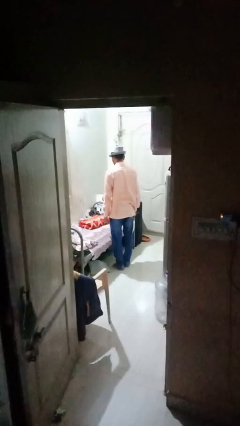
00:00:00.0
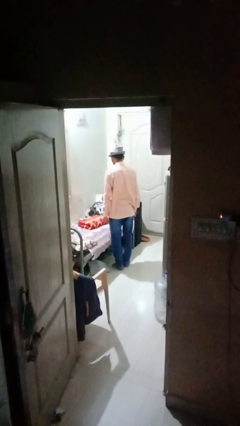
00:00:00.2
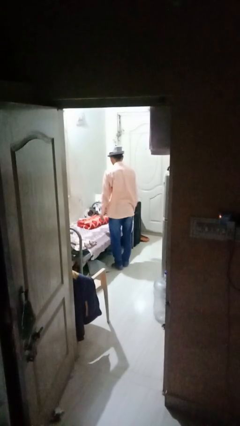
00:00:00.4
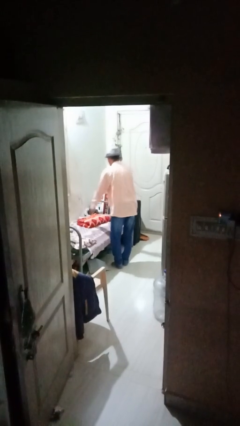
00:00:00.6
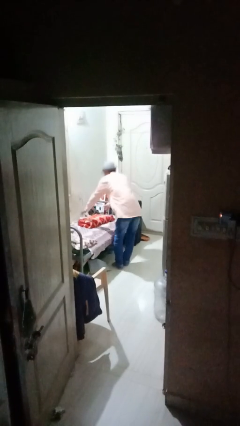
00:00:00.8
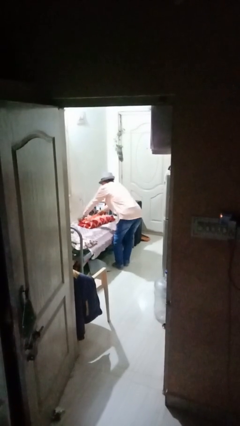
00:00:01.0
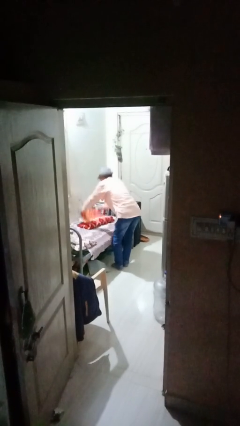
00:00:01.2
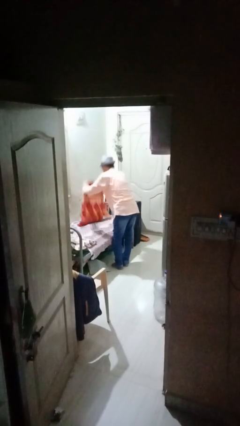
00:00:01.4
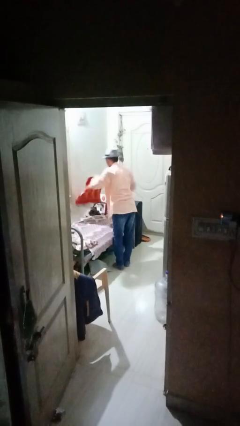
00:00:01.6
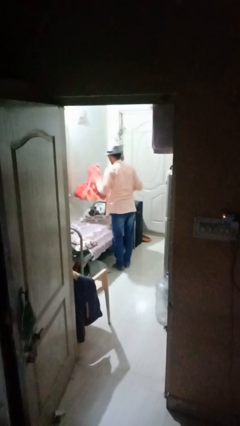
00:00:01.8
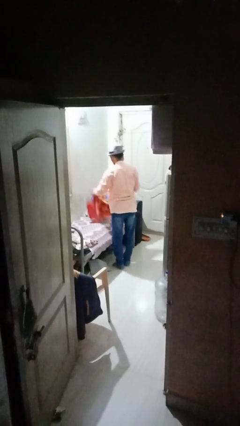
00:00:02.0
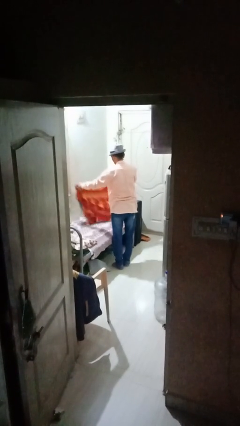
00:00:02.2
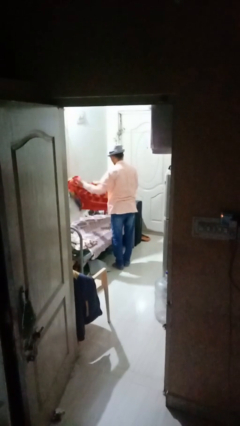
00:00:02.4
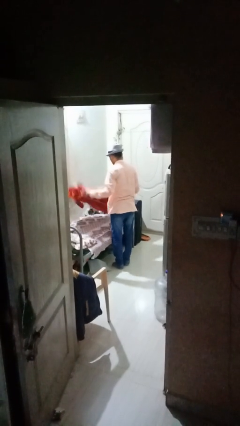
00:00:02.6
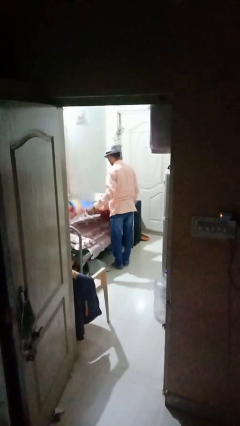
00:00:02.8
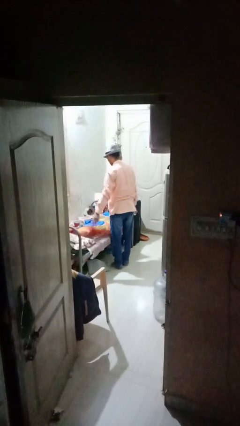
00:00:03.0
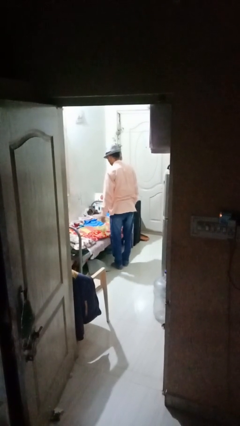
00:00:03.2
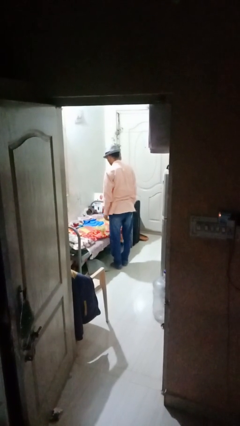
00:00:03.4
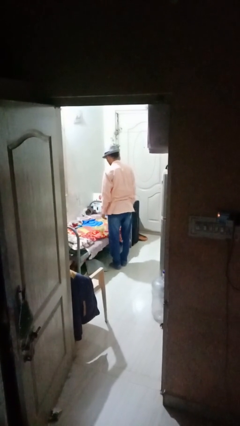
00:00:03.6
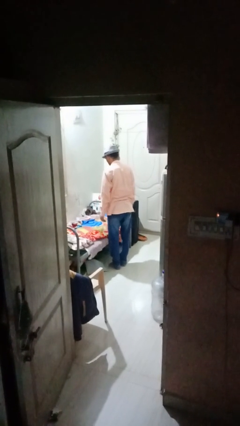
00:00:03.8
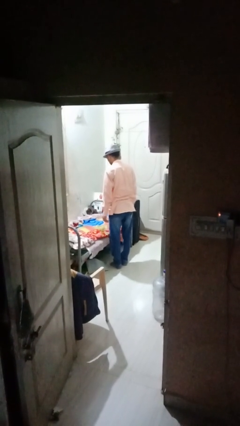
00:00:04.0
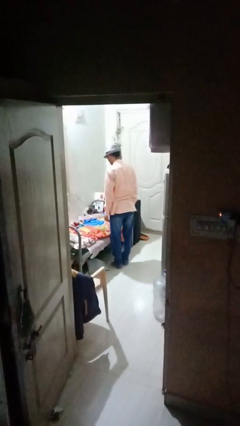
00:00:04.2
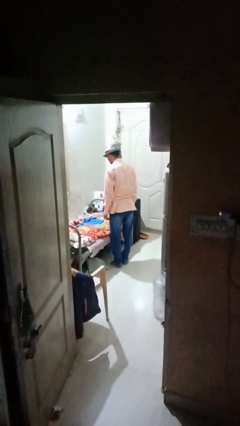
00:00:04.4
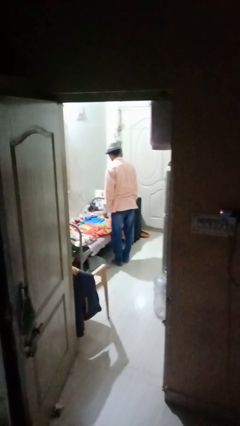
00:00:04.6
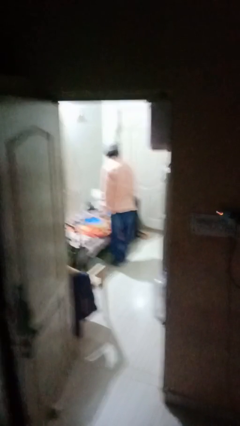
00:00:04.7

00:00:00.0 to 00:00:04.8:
person unfolds blanket

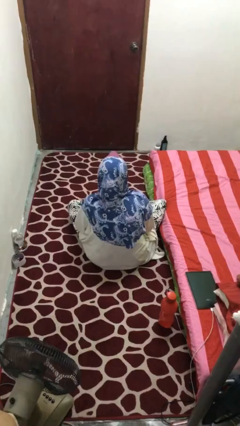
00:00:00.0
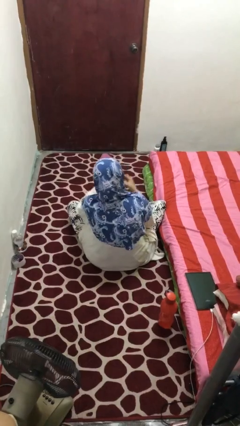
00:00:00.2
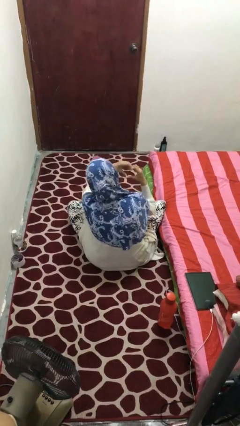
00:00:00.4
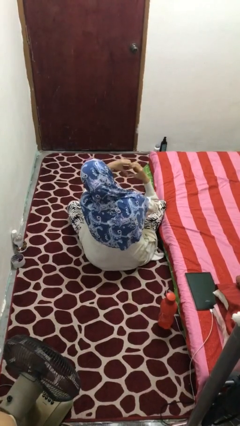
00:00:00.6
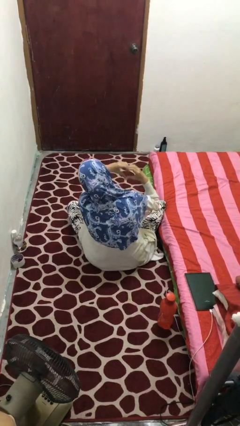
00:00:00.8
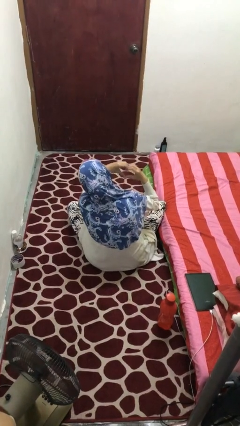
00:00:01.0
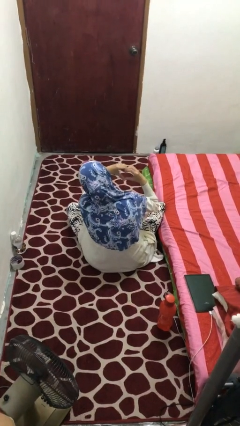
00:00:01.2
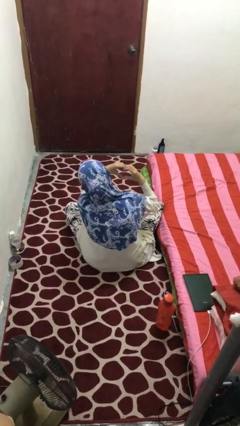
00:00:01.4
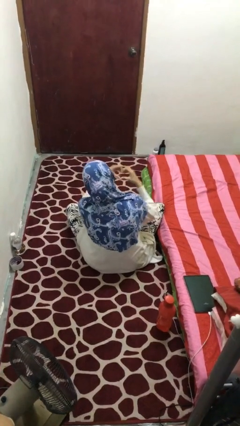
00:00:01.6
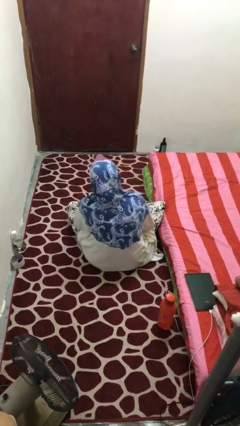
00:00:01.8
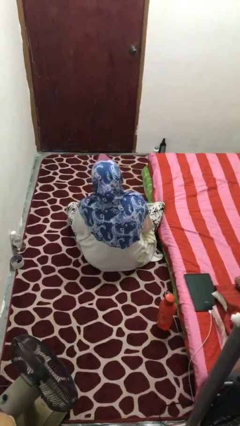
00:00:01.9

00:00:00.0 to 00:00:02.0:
person gestures heart

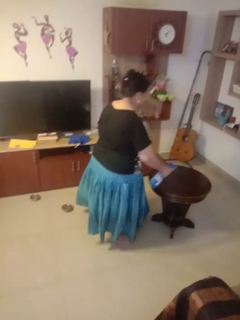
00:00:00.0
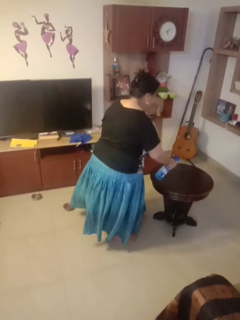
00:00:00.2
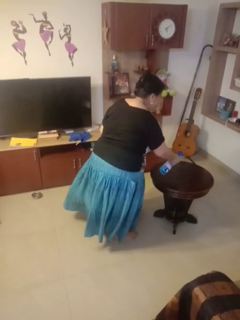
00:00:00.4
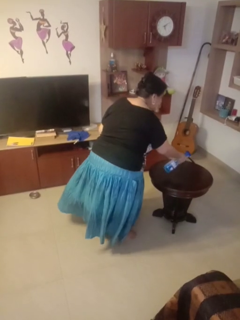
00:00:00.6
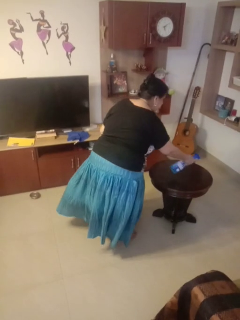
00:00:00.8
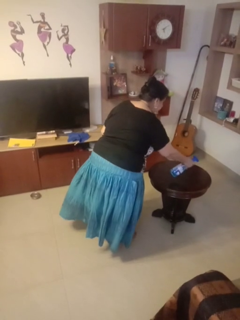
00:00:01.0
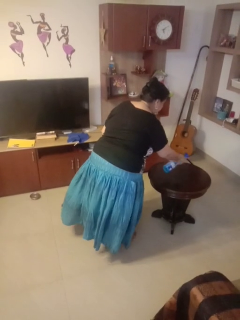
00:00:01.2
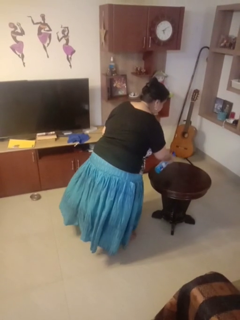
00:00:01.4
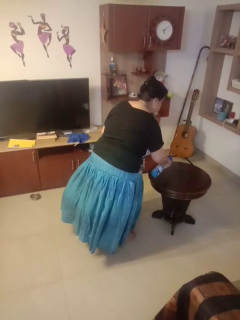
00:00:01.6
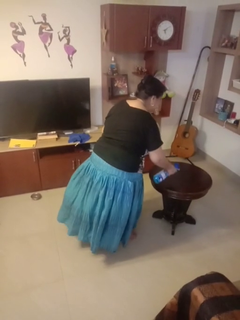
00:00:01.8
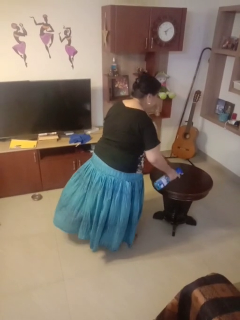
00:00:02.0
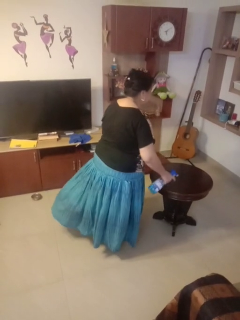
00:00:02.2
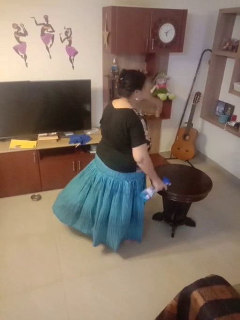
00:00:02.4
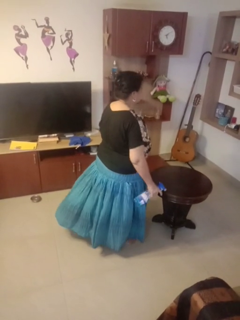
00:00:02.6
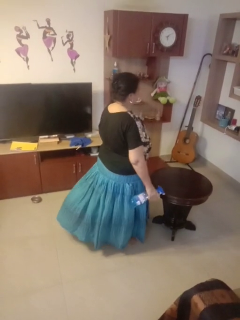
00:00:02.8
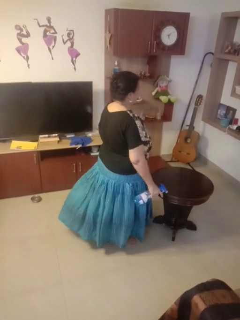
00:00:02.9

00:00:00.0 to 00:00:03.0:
person sprays from bottle

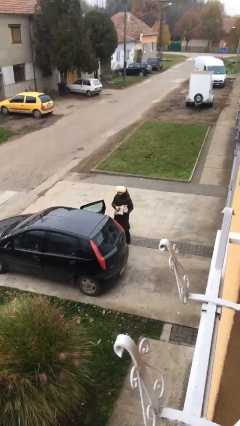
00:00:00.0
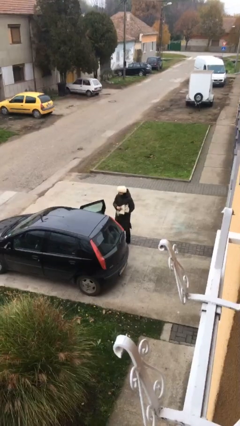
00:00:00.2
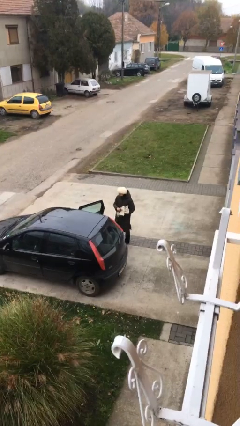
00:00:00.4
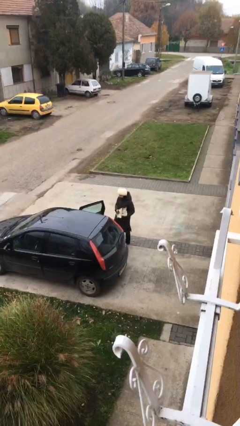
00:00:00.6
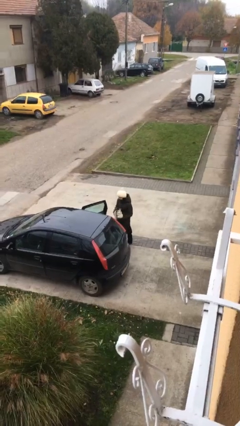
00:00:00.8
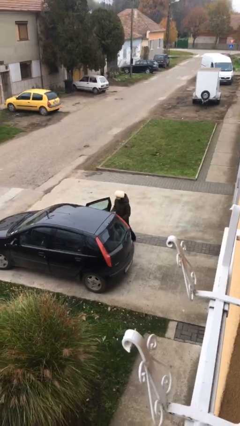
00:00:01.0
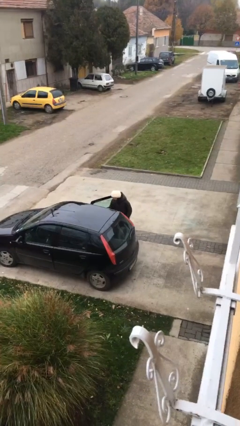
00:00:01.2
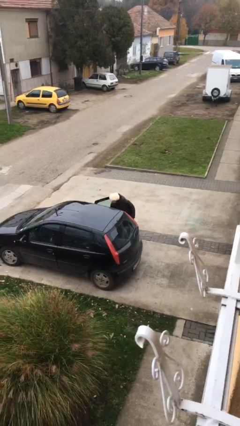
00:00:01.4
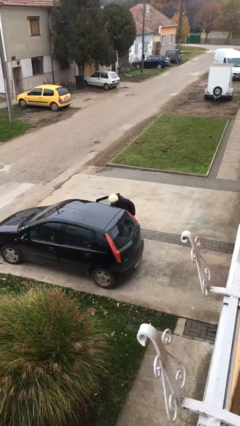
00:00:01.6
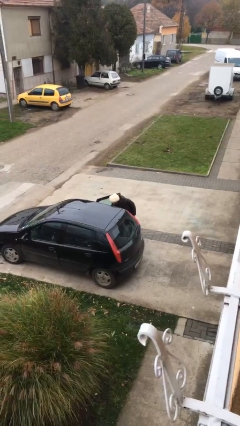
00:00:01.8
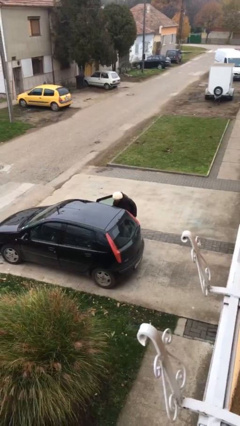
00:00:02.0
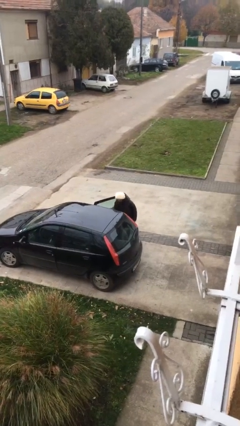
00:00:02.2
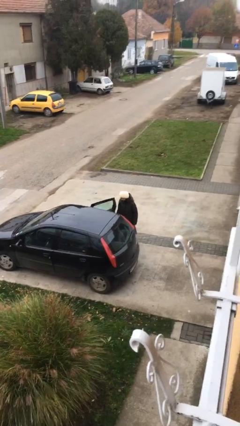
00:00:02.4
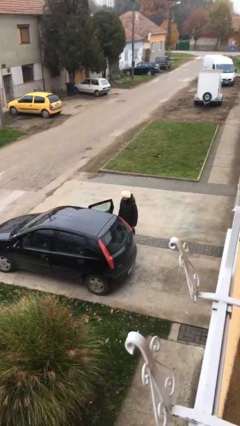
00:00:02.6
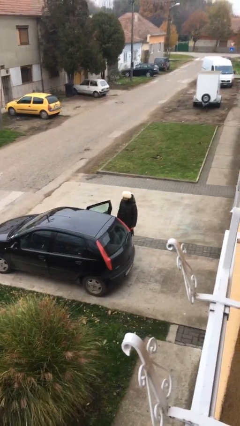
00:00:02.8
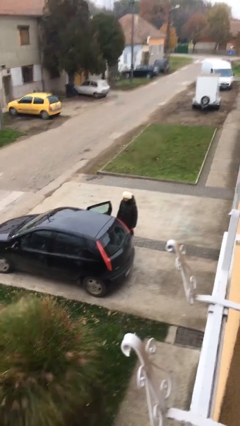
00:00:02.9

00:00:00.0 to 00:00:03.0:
person loads car

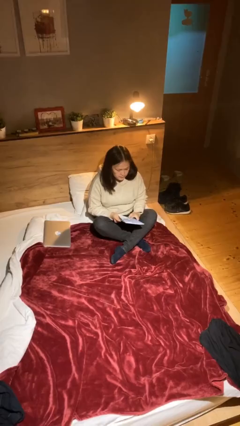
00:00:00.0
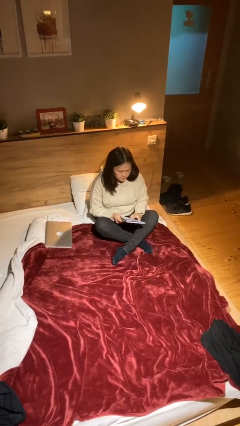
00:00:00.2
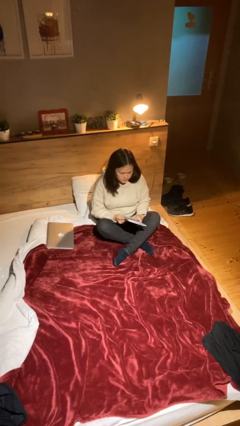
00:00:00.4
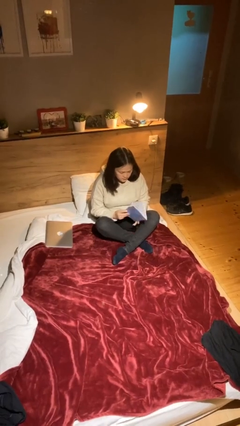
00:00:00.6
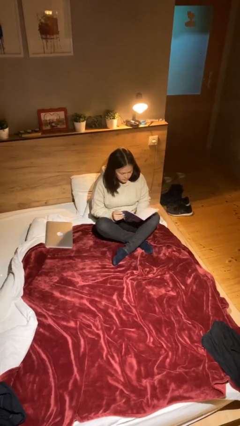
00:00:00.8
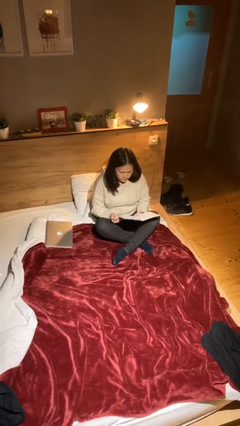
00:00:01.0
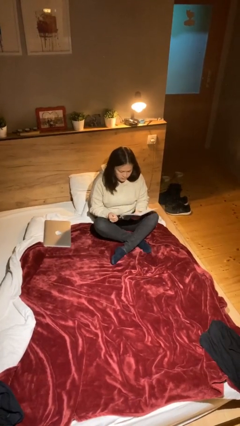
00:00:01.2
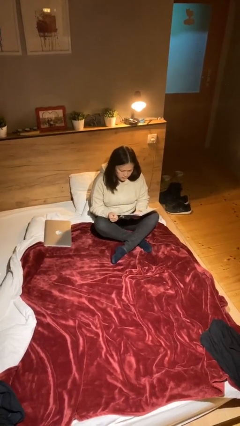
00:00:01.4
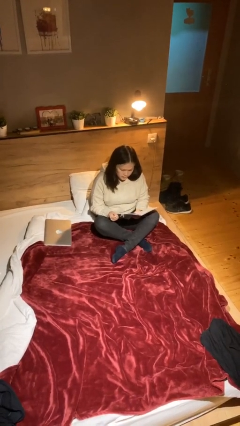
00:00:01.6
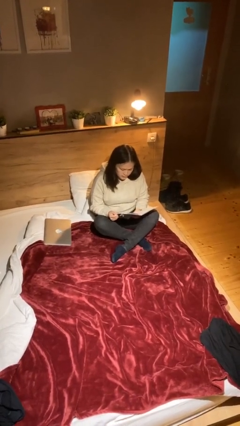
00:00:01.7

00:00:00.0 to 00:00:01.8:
person reads document

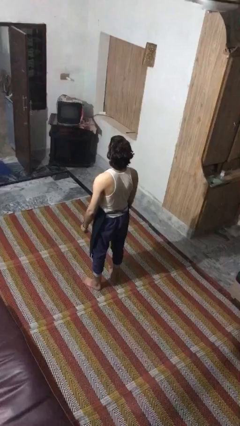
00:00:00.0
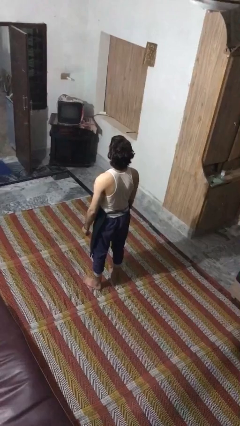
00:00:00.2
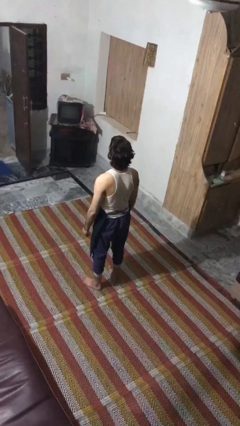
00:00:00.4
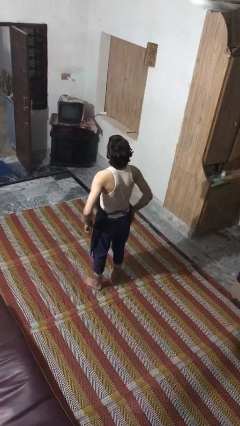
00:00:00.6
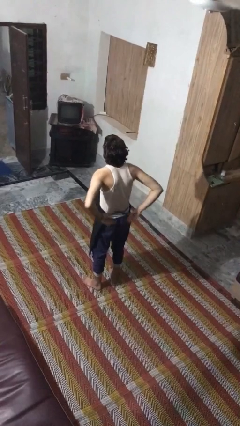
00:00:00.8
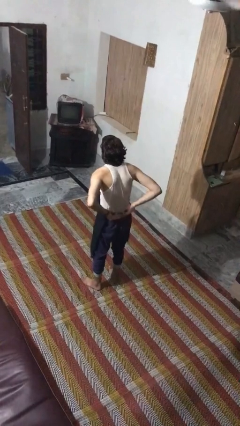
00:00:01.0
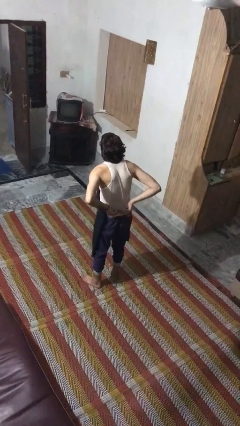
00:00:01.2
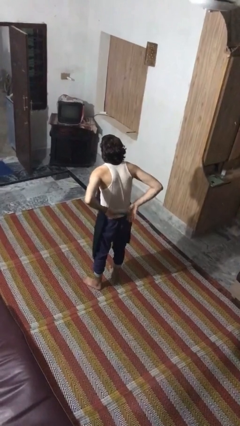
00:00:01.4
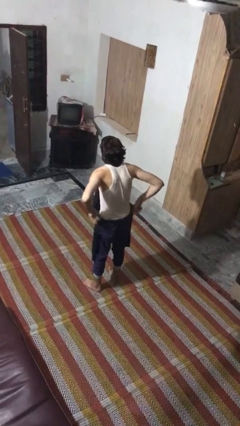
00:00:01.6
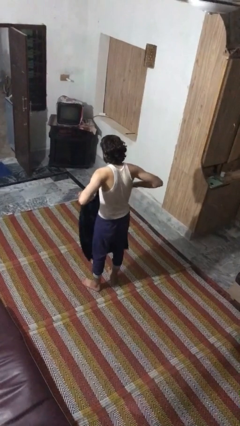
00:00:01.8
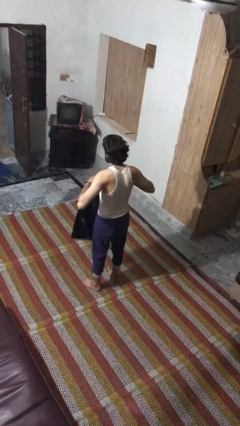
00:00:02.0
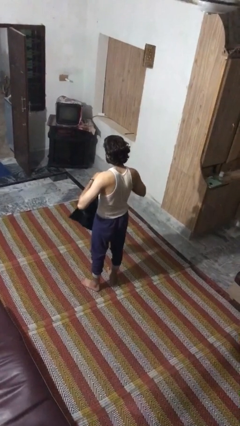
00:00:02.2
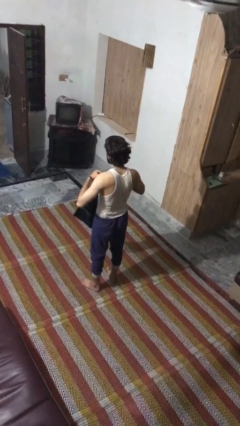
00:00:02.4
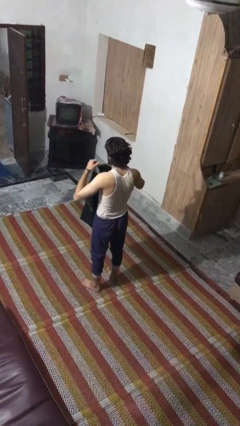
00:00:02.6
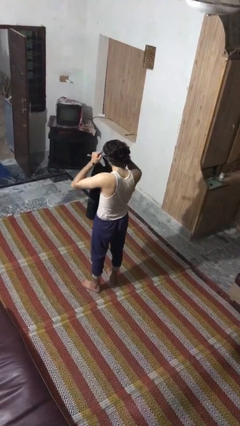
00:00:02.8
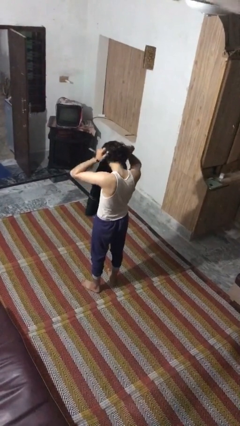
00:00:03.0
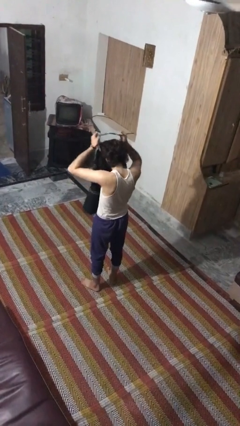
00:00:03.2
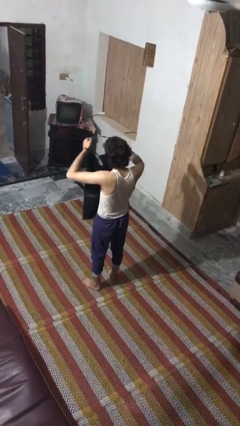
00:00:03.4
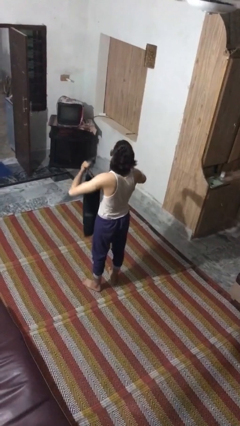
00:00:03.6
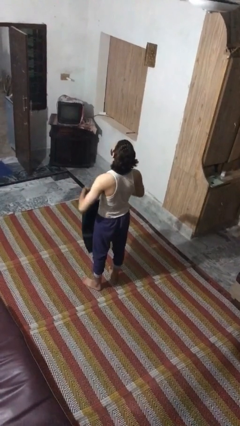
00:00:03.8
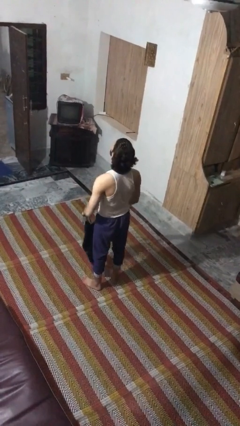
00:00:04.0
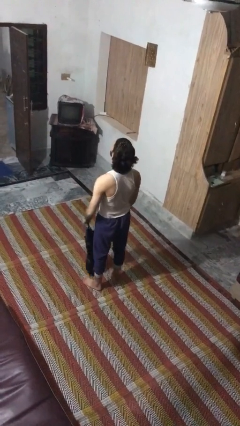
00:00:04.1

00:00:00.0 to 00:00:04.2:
person takes off apron
